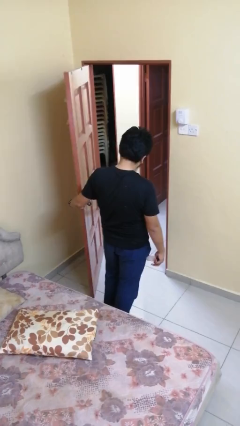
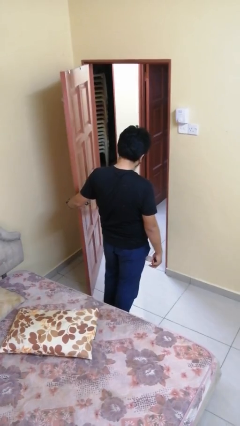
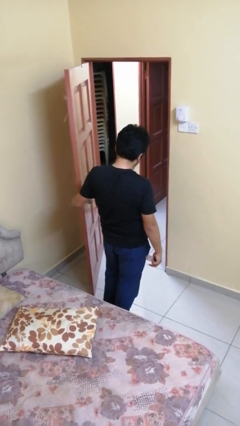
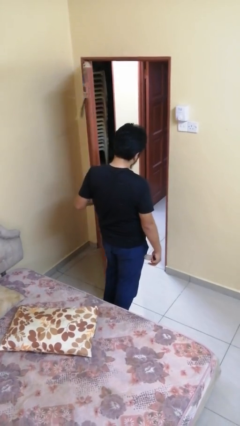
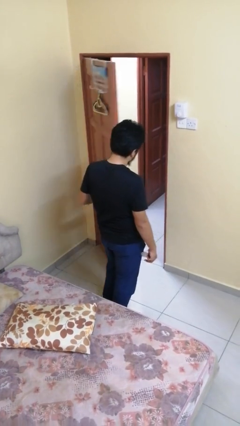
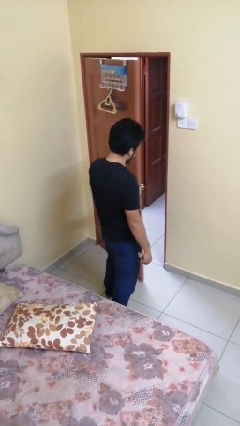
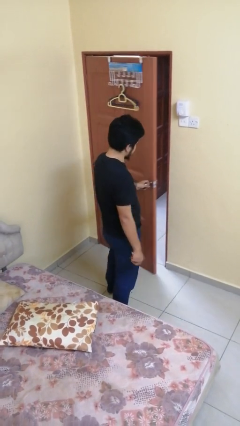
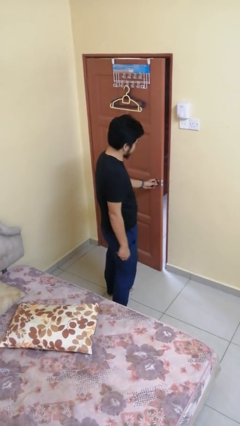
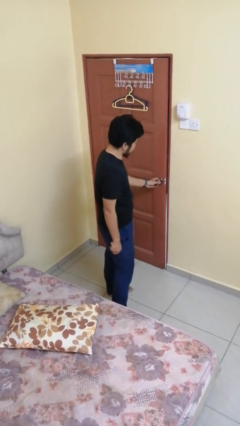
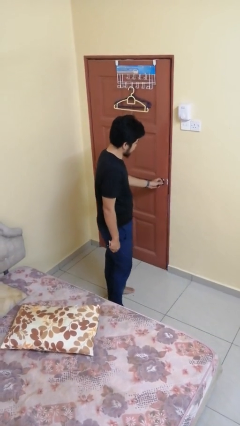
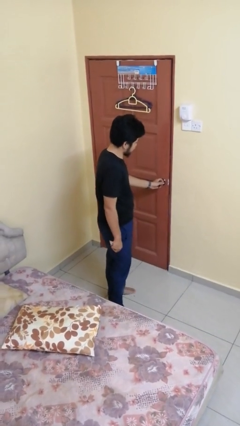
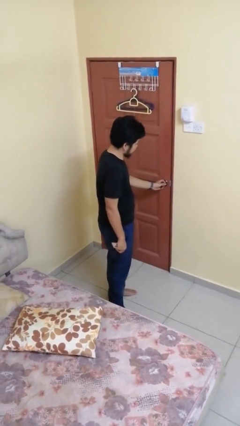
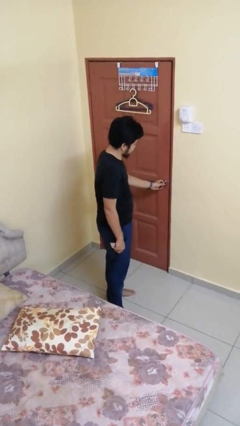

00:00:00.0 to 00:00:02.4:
person closes facility door

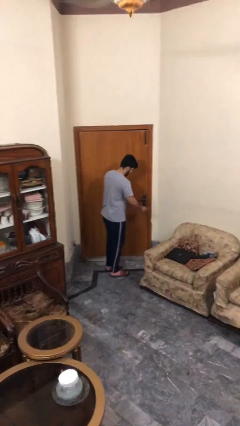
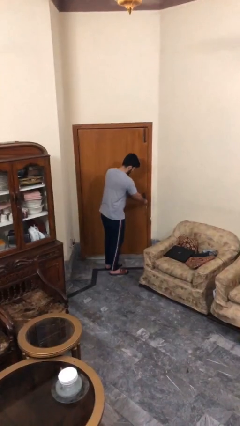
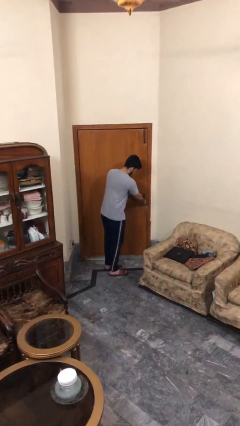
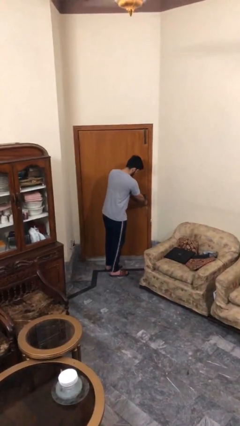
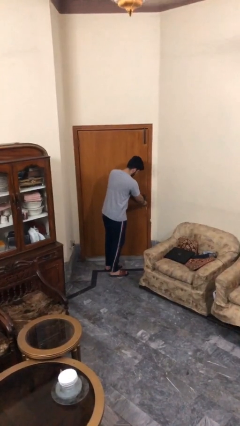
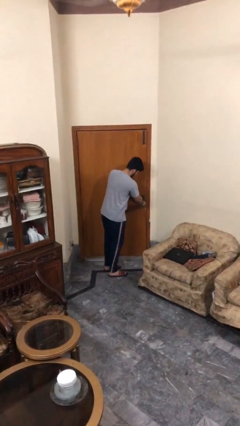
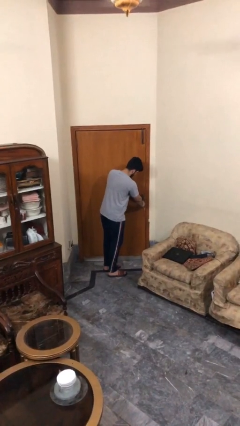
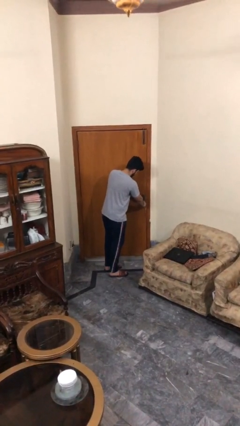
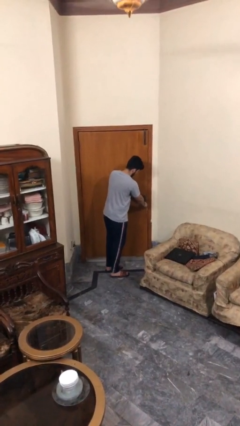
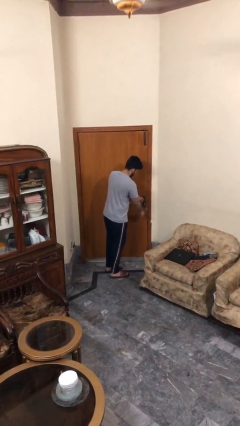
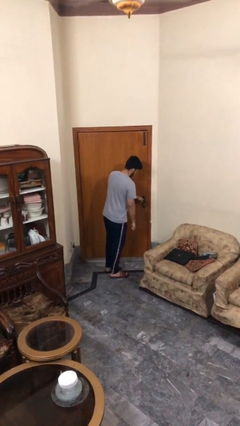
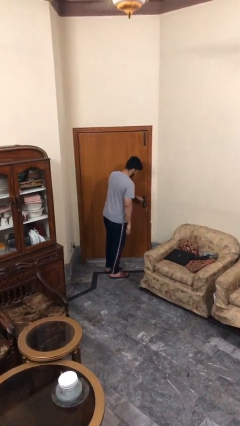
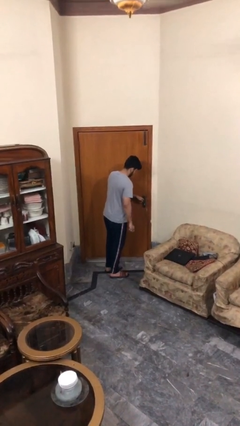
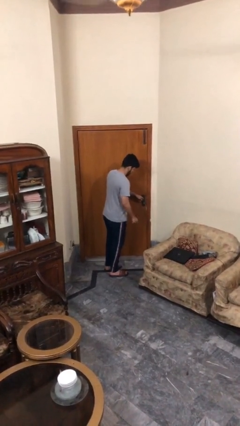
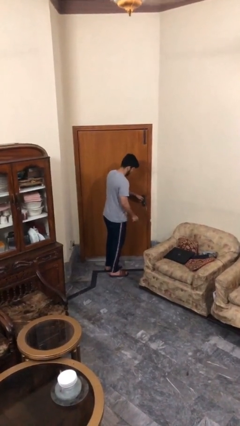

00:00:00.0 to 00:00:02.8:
person unlocks door with keys

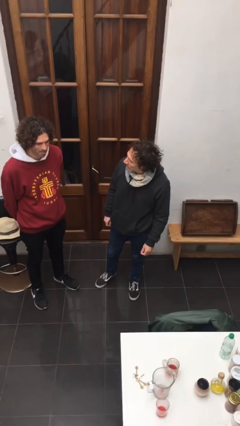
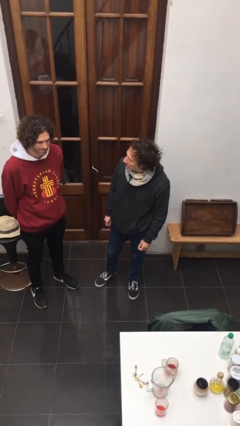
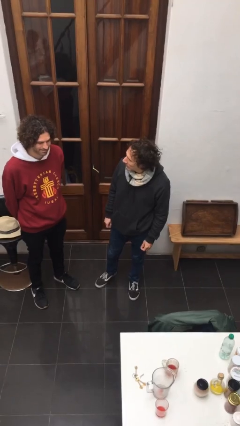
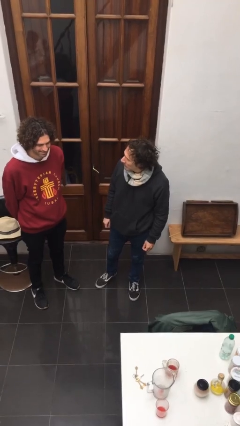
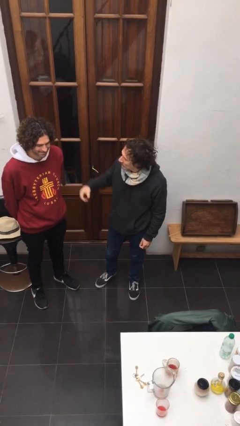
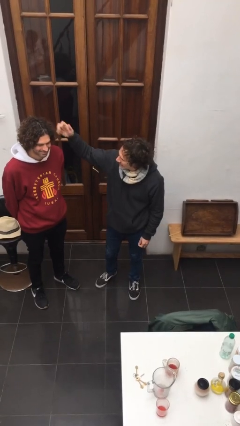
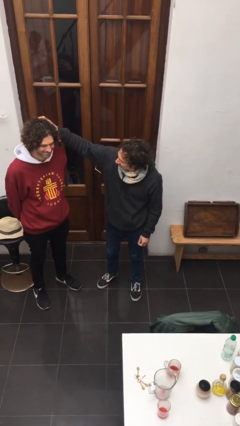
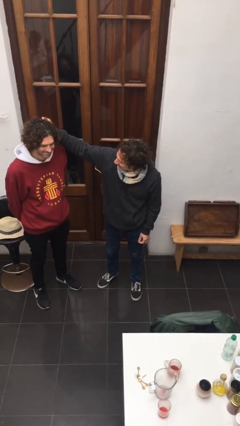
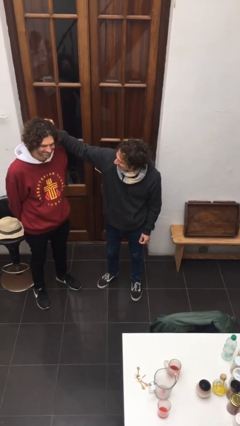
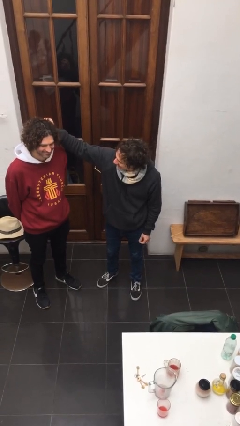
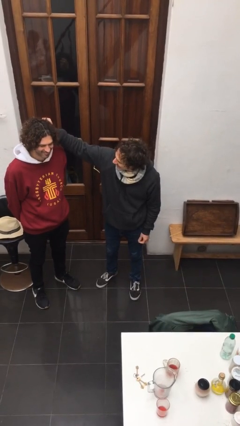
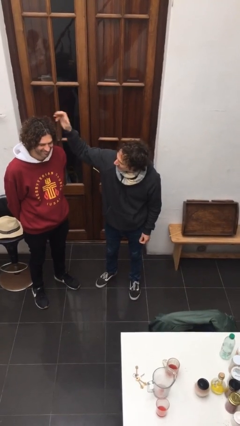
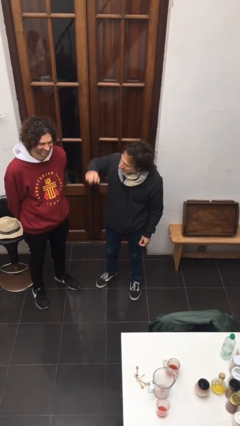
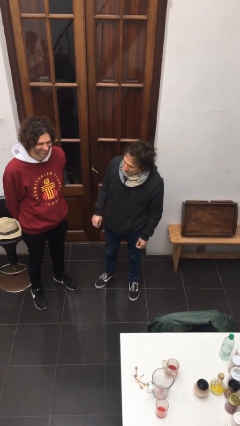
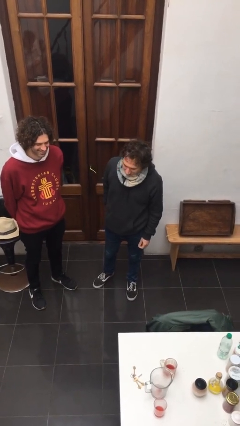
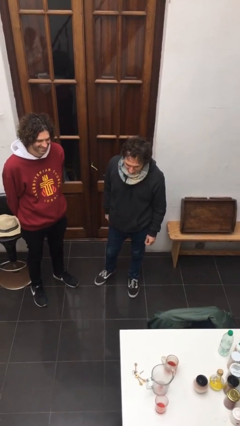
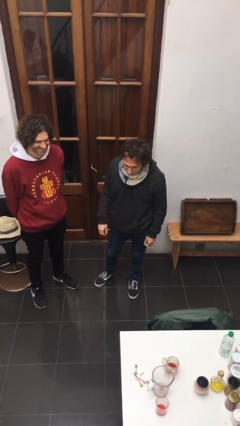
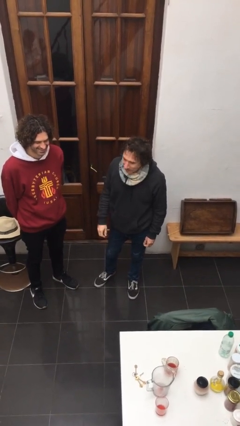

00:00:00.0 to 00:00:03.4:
person grabs person by hair

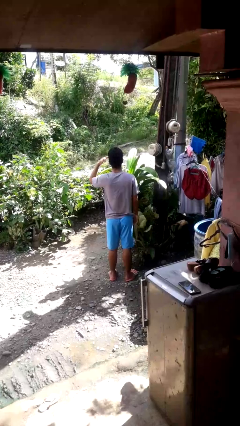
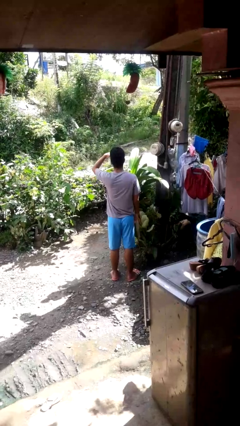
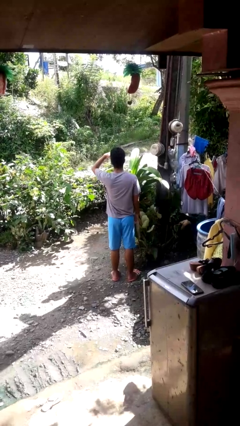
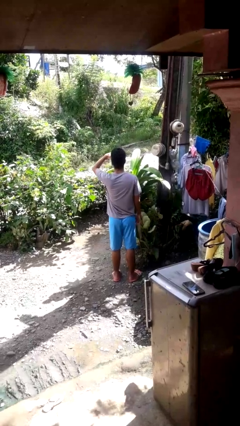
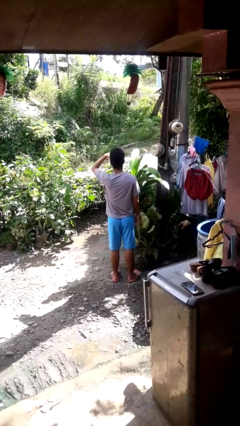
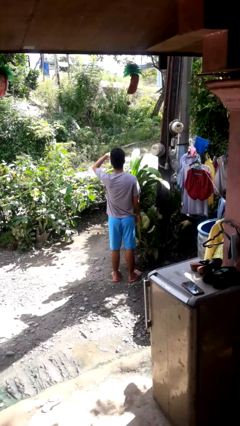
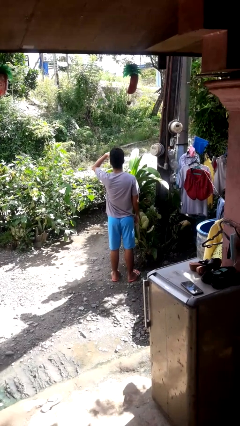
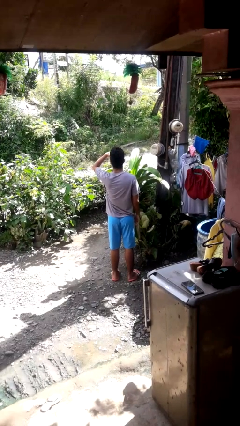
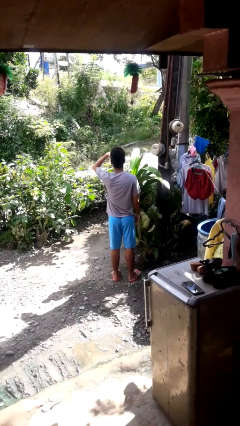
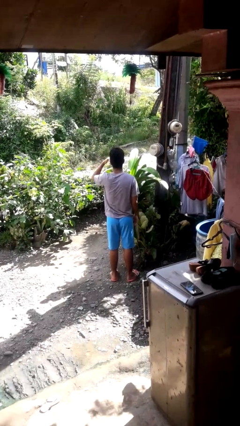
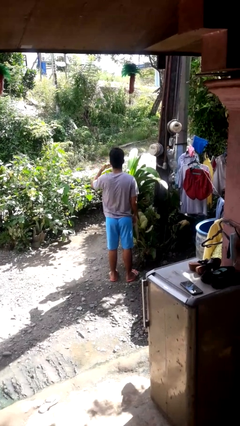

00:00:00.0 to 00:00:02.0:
person shades eyes

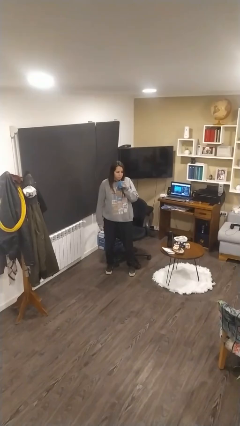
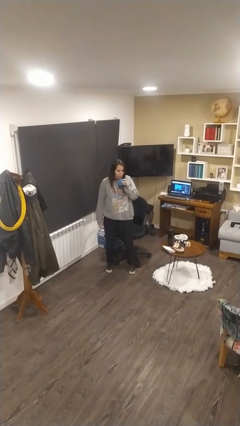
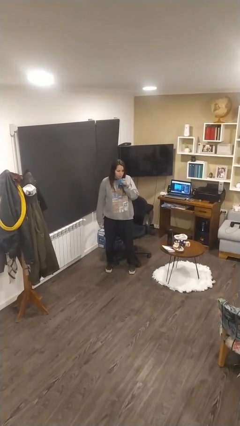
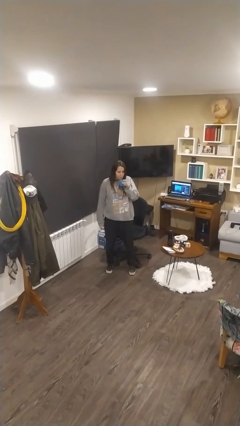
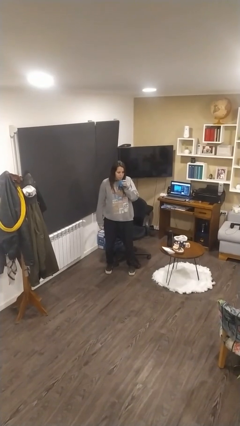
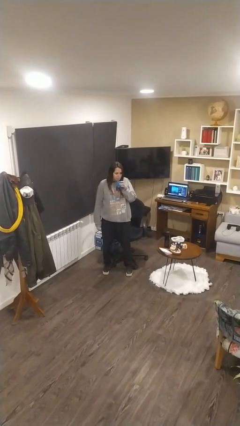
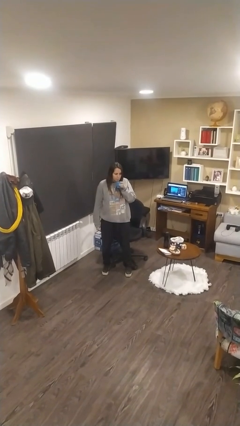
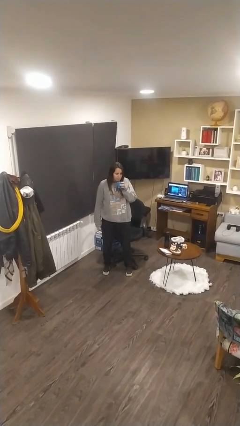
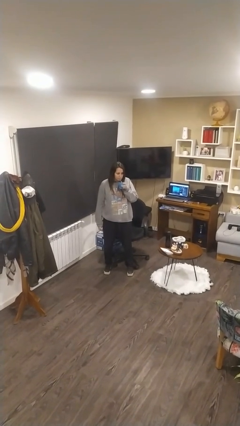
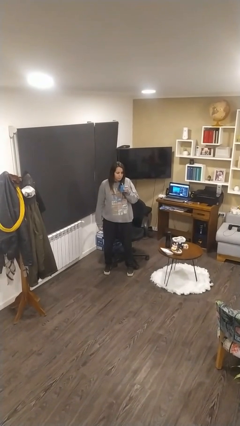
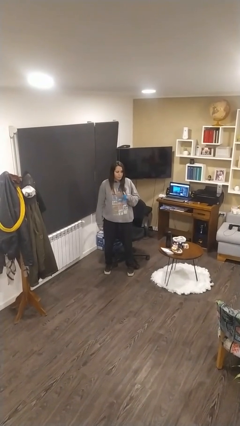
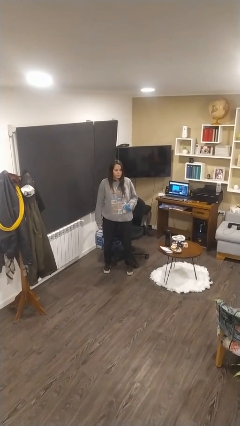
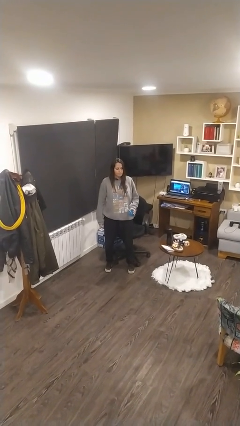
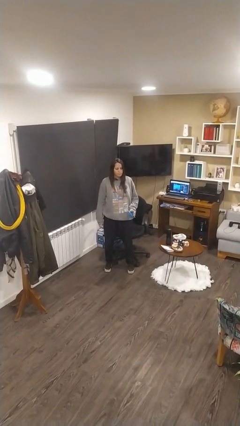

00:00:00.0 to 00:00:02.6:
person drinks from straw

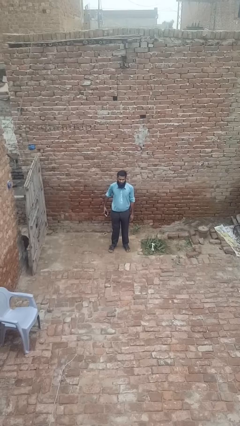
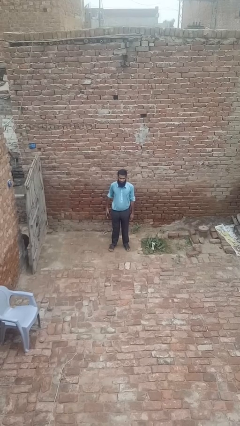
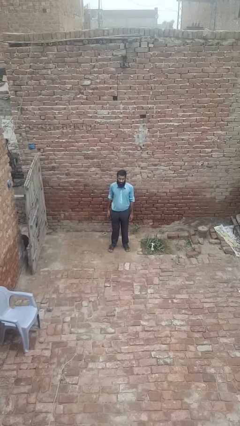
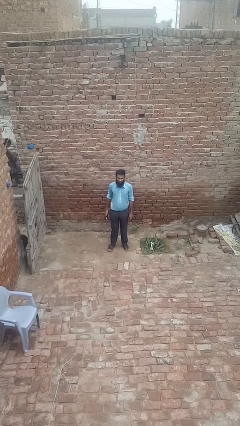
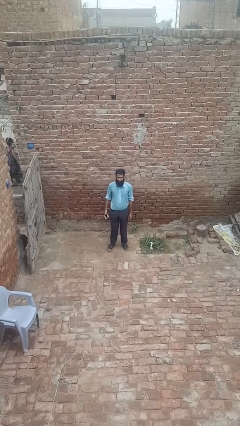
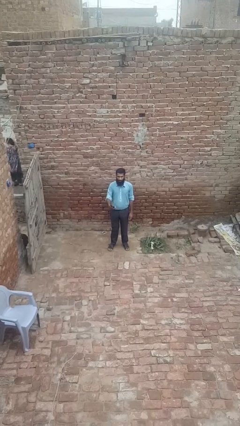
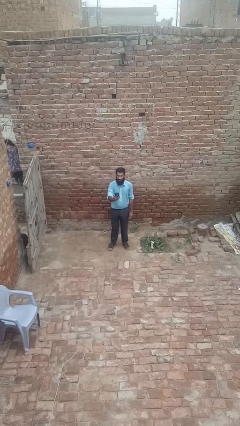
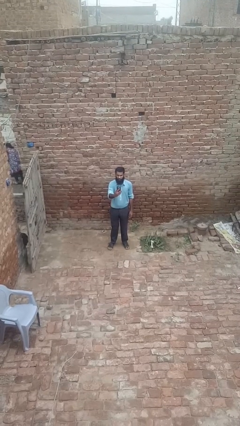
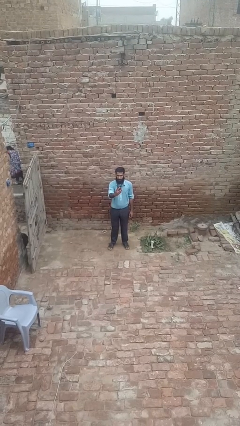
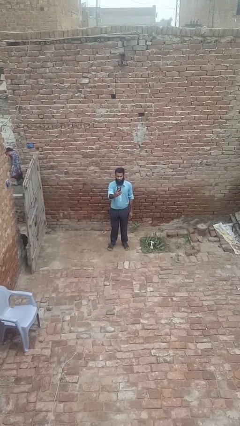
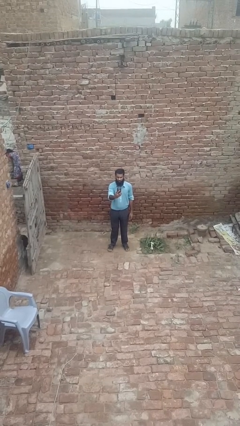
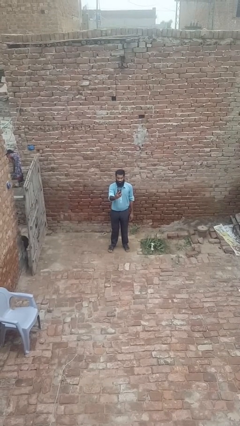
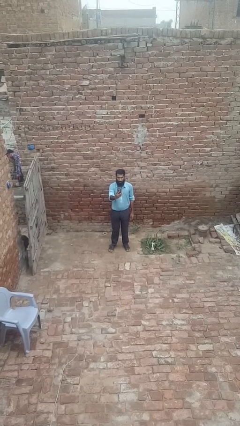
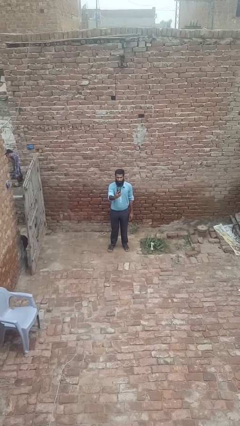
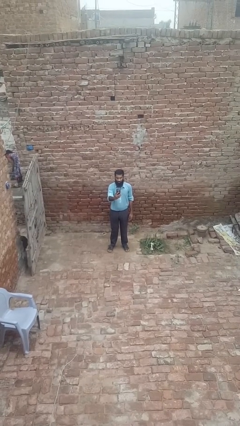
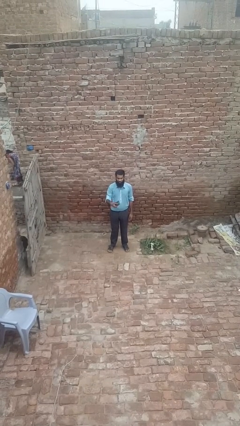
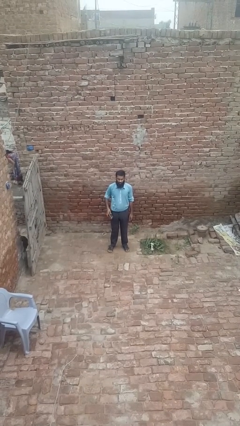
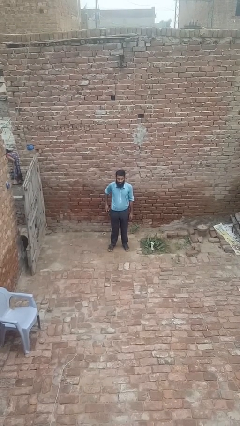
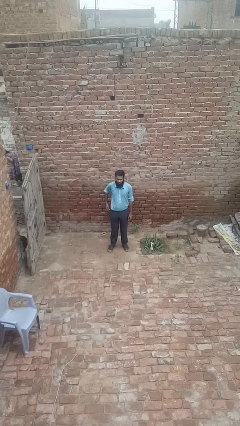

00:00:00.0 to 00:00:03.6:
person puts phone into pocket

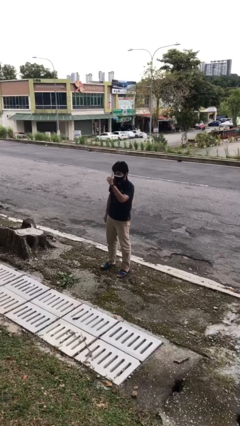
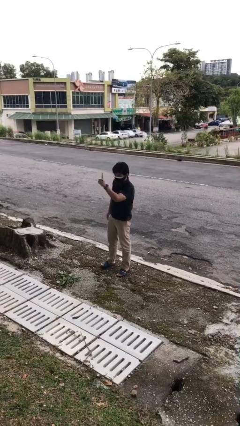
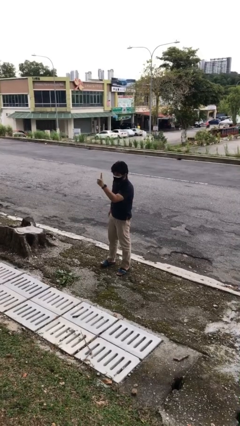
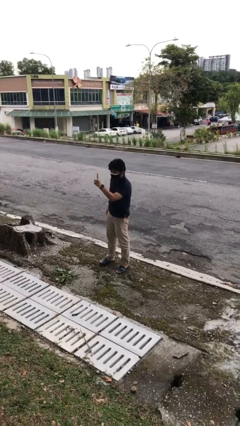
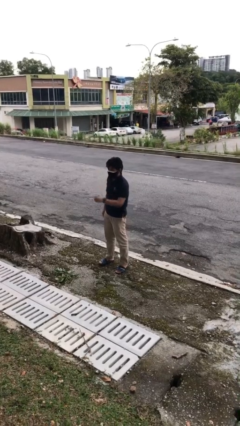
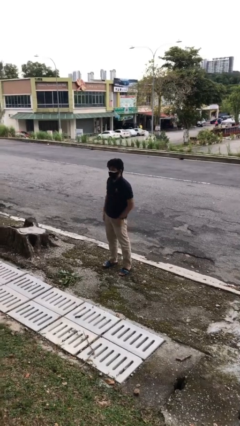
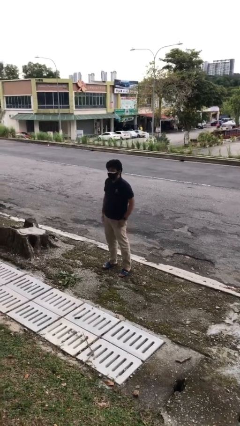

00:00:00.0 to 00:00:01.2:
person gestures number one
